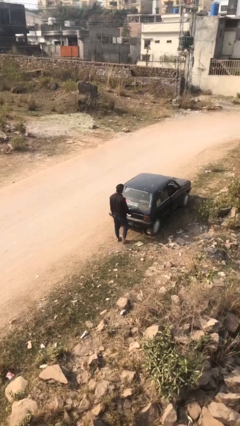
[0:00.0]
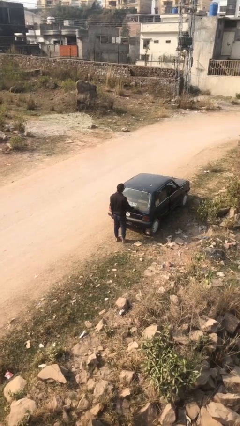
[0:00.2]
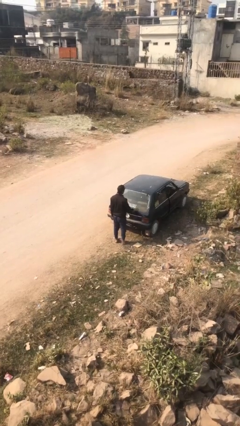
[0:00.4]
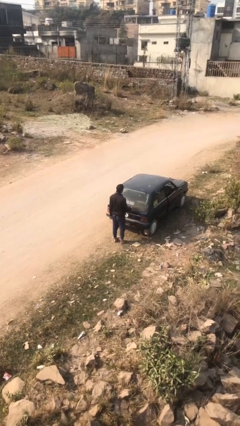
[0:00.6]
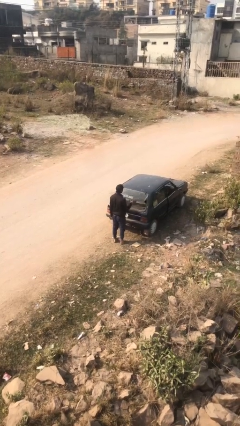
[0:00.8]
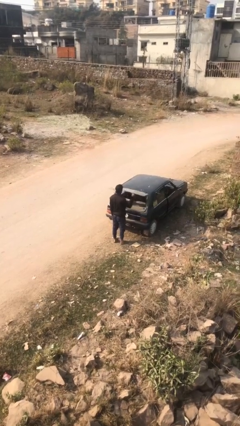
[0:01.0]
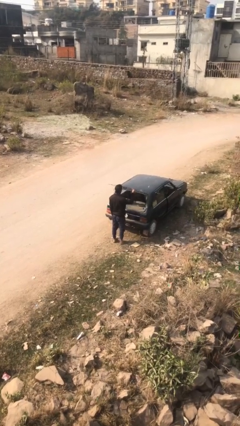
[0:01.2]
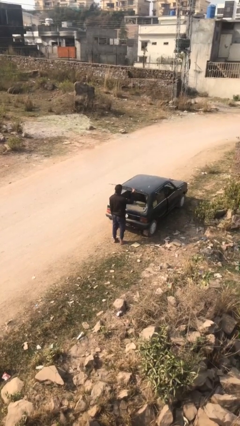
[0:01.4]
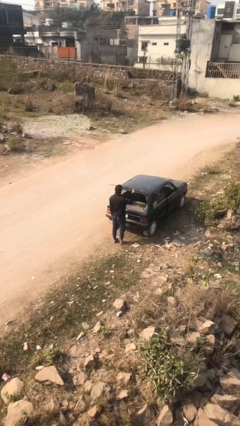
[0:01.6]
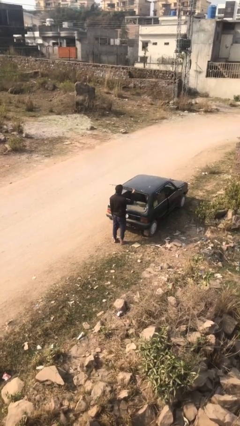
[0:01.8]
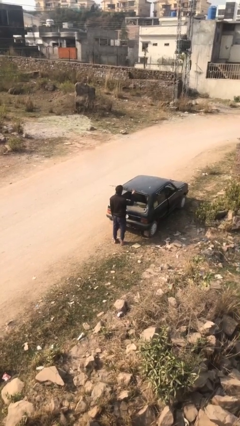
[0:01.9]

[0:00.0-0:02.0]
person opens car trunk

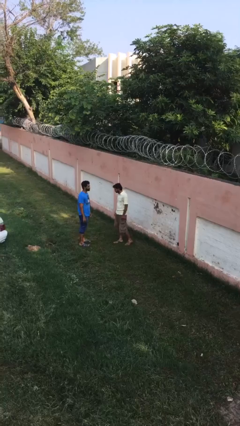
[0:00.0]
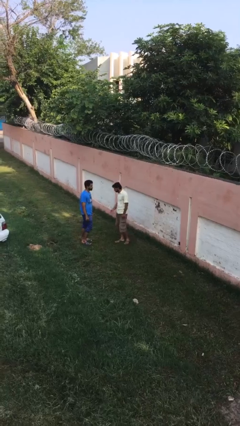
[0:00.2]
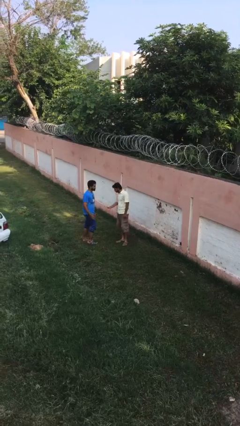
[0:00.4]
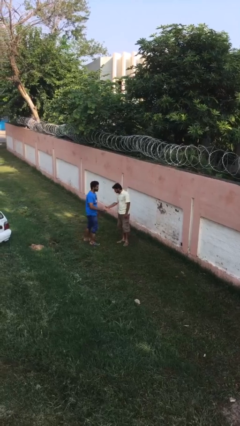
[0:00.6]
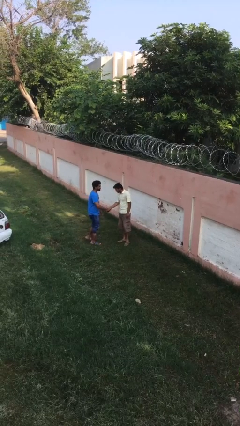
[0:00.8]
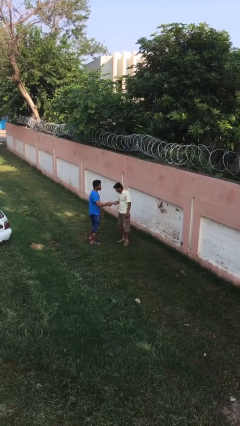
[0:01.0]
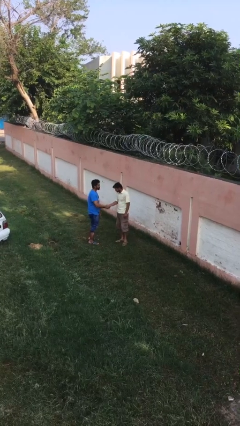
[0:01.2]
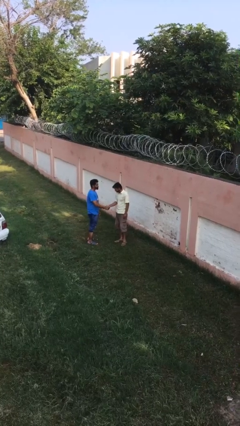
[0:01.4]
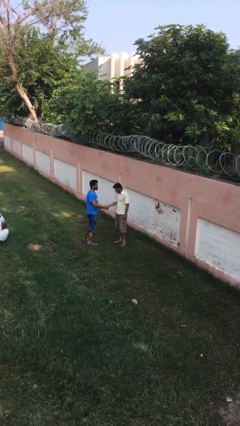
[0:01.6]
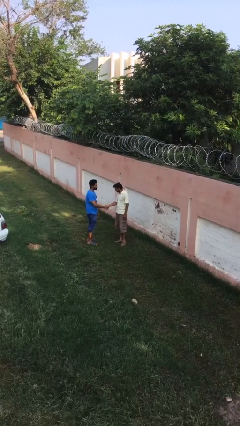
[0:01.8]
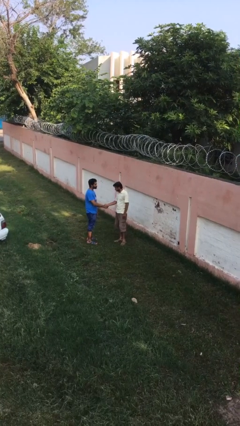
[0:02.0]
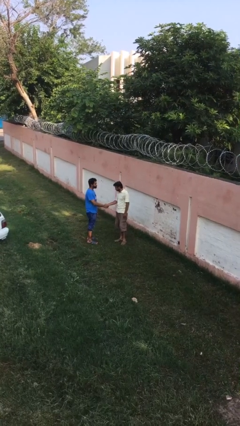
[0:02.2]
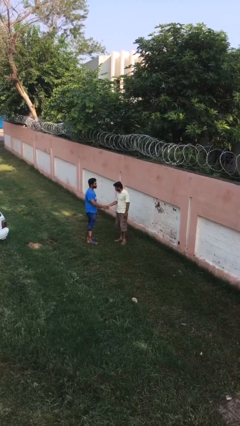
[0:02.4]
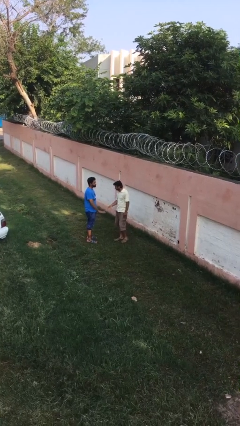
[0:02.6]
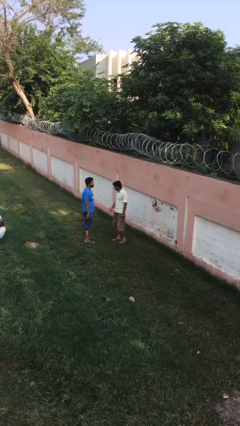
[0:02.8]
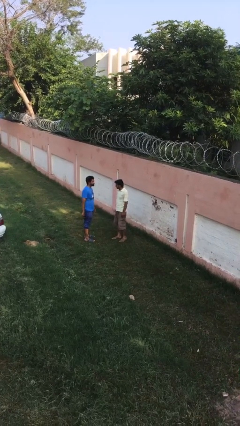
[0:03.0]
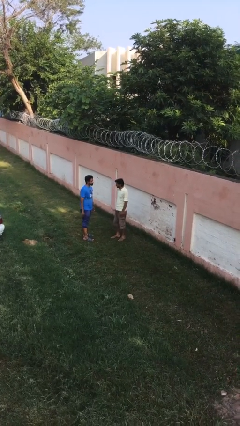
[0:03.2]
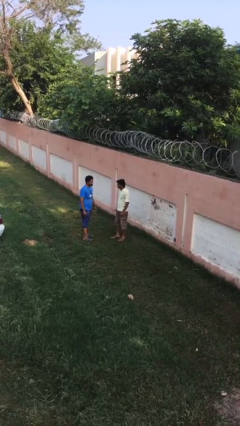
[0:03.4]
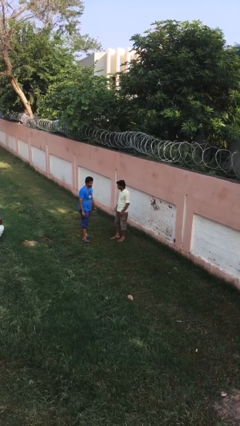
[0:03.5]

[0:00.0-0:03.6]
person shakes hand

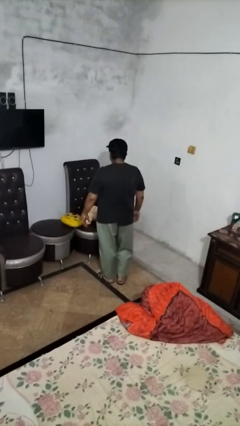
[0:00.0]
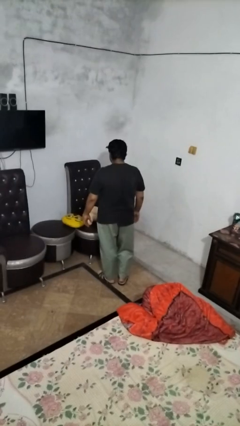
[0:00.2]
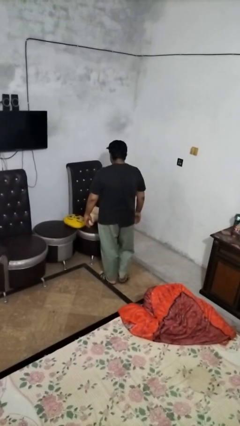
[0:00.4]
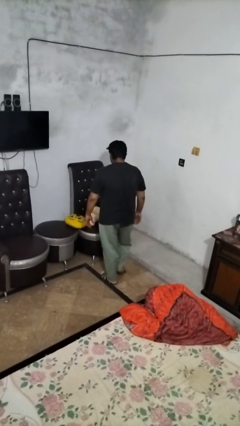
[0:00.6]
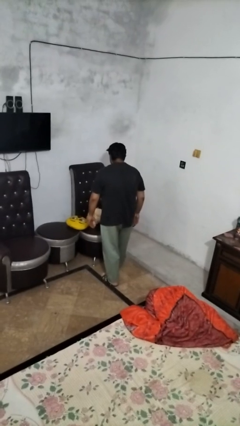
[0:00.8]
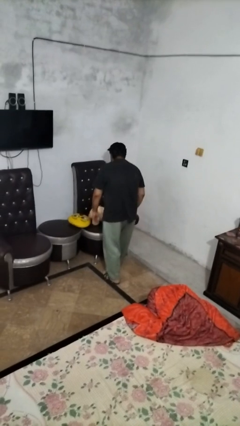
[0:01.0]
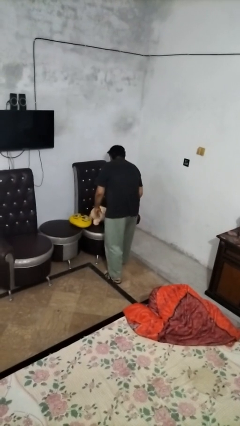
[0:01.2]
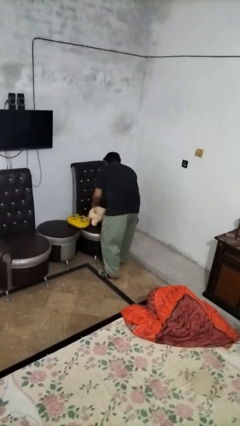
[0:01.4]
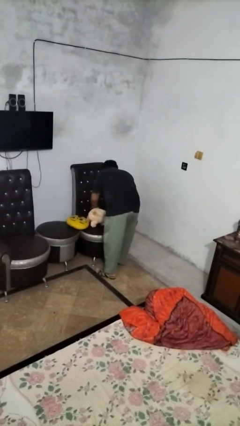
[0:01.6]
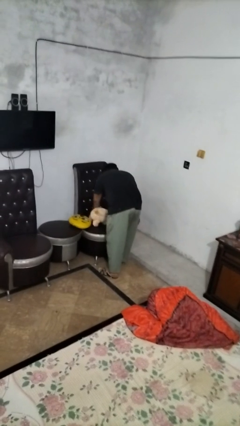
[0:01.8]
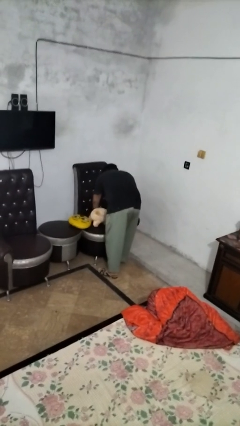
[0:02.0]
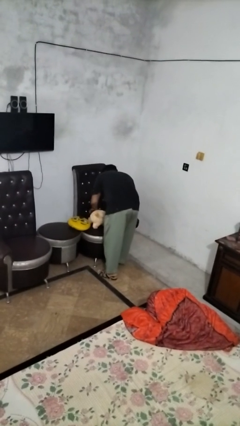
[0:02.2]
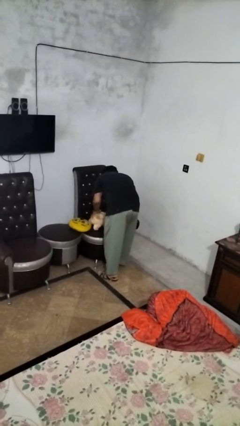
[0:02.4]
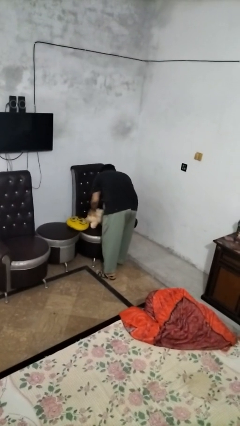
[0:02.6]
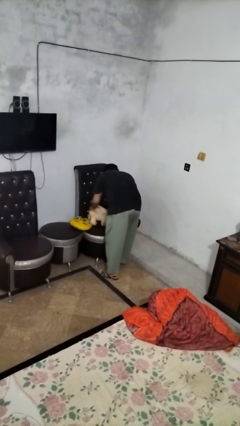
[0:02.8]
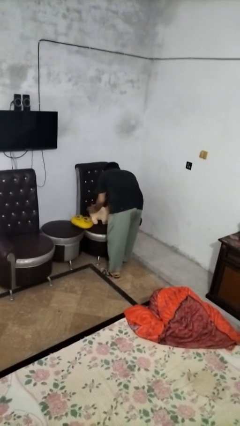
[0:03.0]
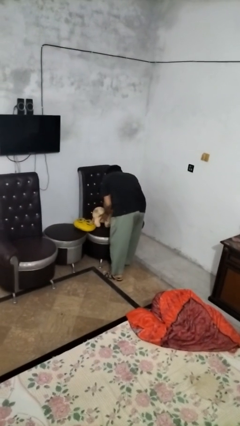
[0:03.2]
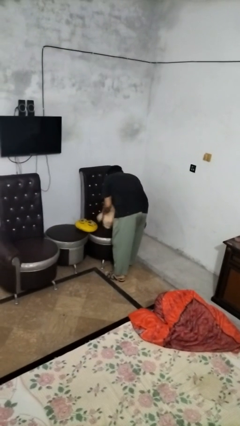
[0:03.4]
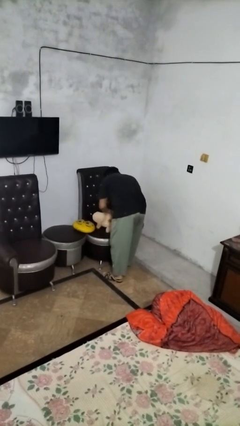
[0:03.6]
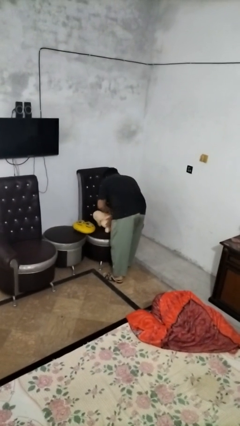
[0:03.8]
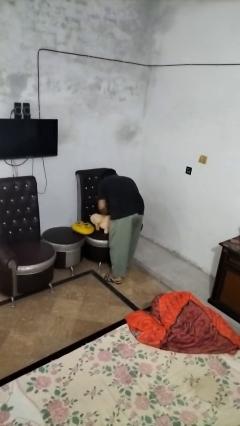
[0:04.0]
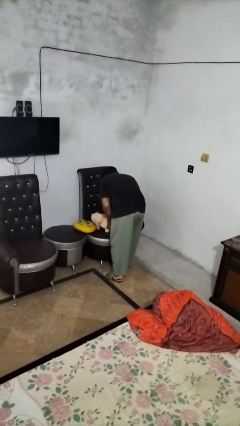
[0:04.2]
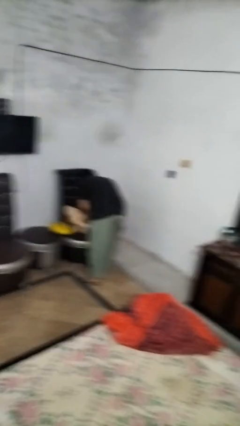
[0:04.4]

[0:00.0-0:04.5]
person searches in couch

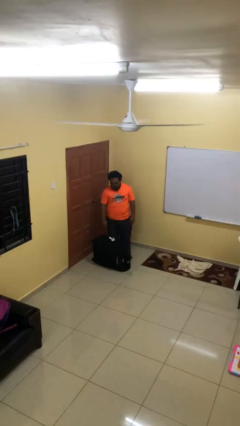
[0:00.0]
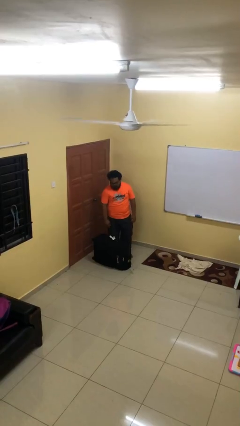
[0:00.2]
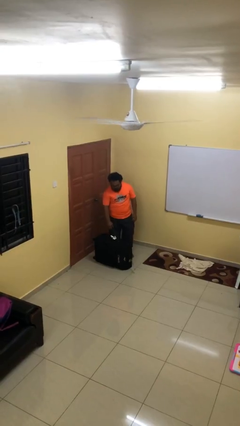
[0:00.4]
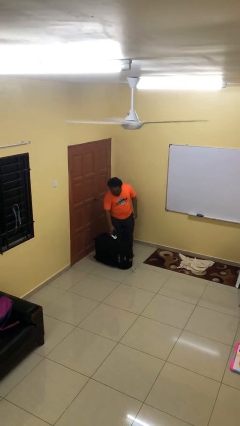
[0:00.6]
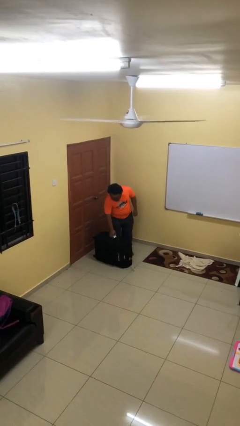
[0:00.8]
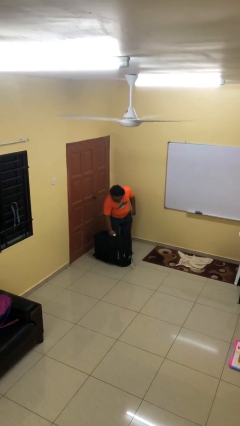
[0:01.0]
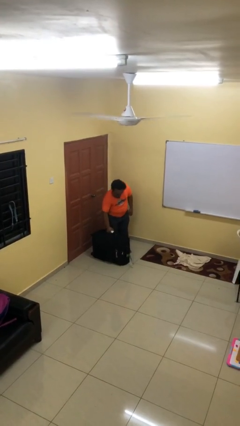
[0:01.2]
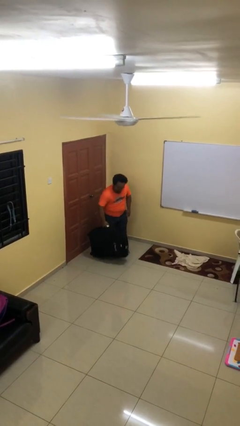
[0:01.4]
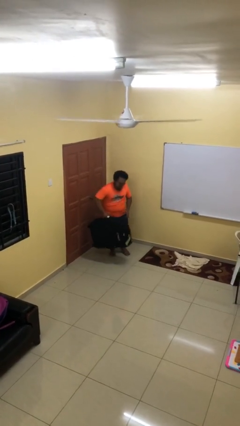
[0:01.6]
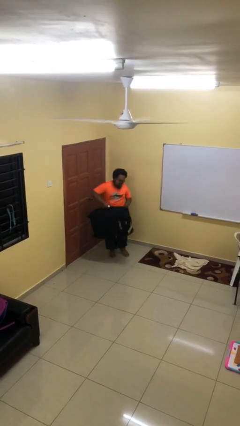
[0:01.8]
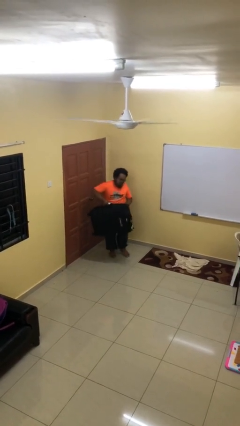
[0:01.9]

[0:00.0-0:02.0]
person picks up object from floor

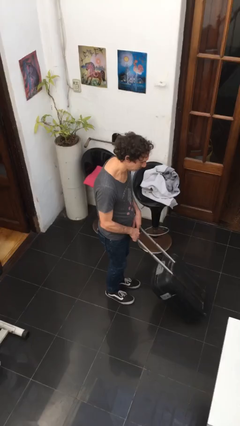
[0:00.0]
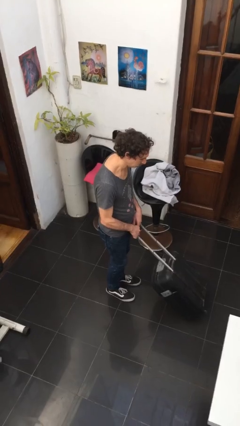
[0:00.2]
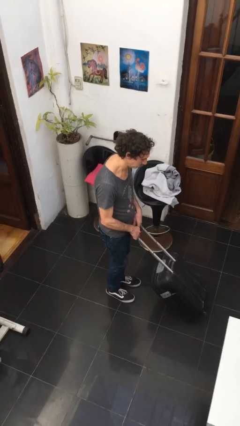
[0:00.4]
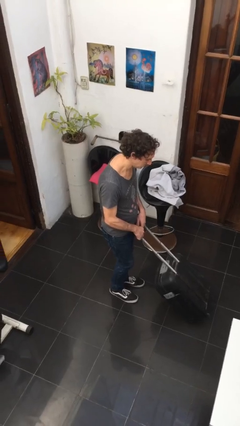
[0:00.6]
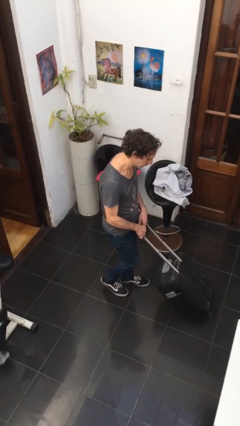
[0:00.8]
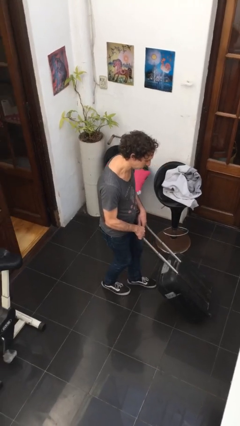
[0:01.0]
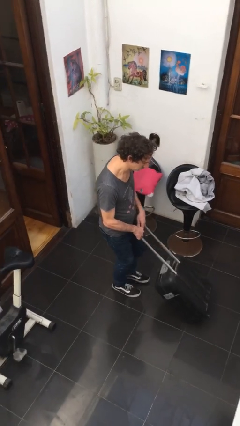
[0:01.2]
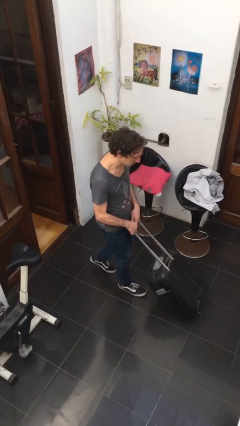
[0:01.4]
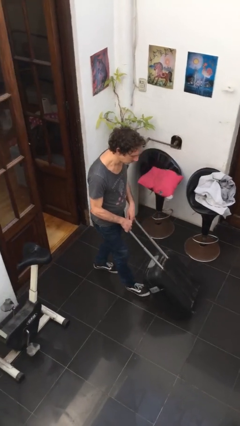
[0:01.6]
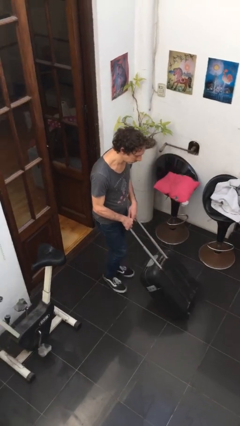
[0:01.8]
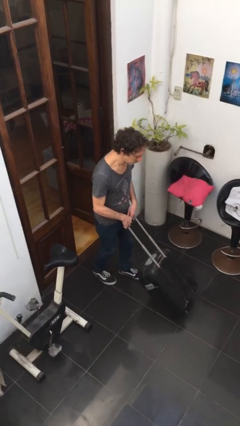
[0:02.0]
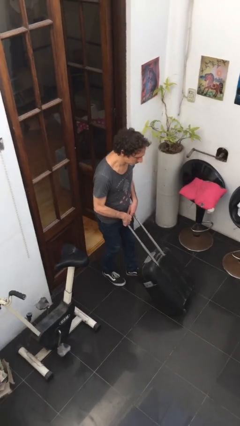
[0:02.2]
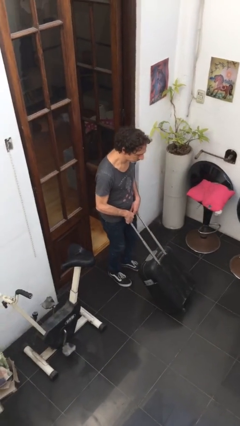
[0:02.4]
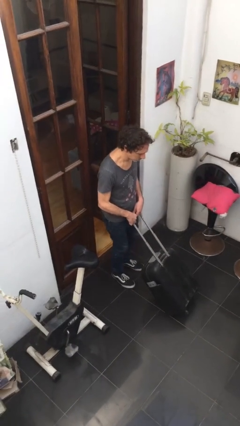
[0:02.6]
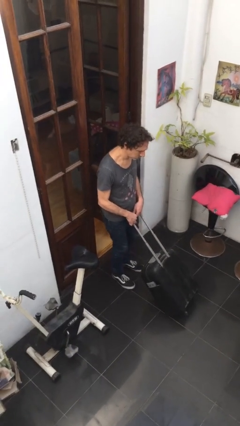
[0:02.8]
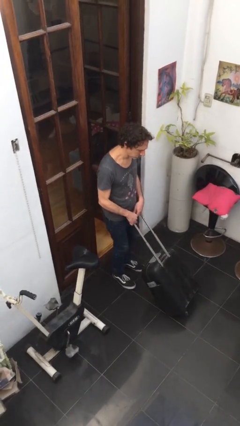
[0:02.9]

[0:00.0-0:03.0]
person pulls wheeled cart

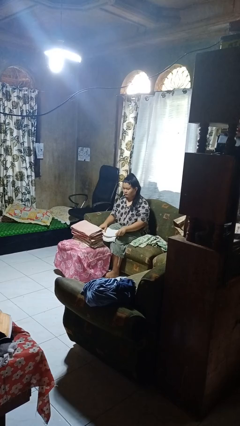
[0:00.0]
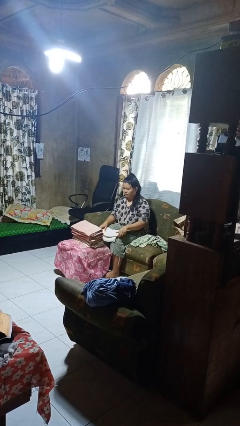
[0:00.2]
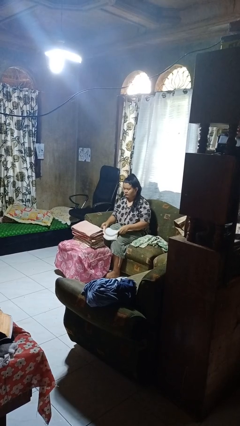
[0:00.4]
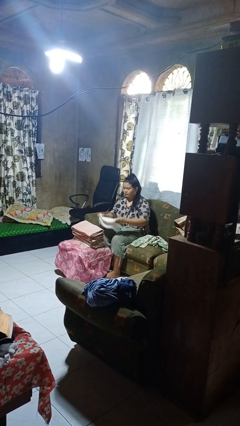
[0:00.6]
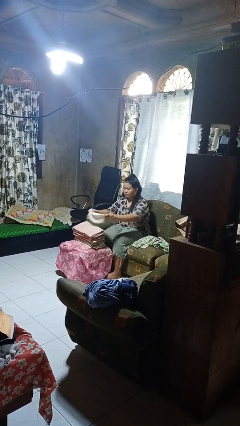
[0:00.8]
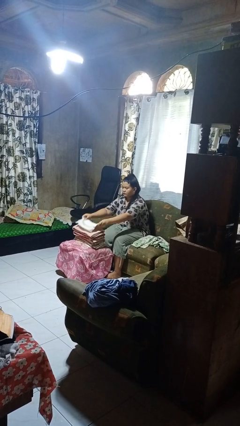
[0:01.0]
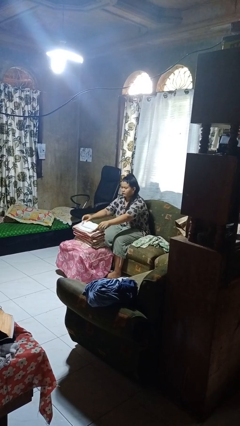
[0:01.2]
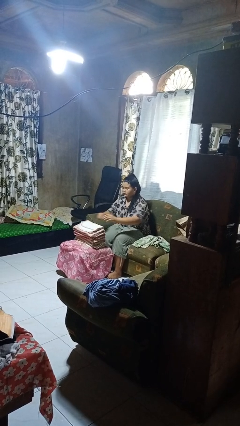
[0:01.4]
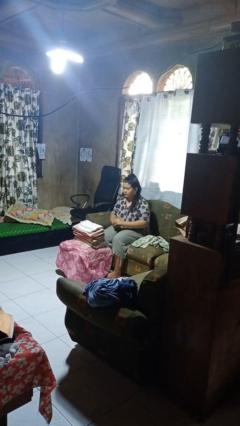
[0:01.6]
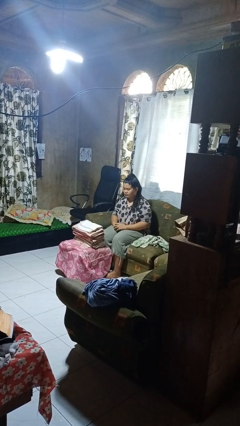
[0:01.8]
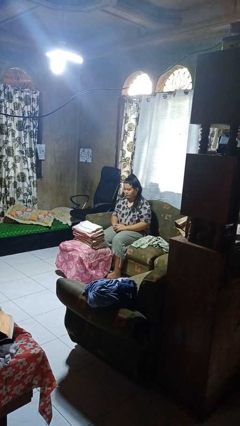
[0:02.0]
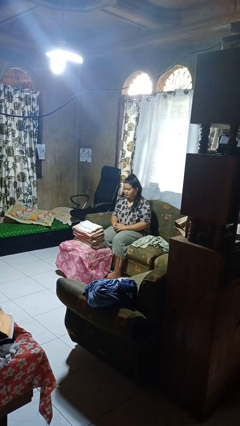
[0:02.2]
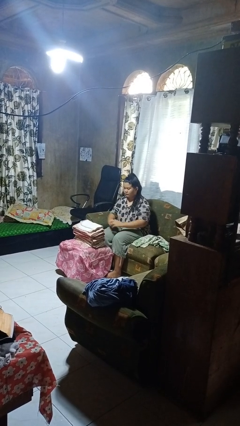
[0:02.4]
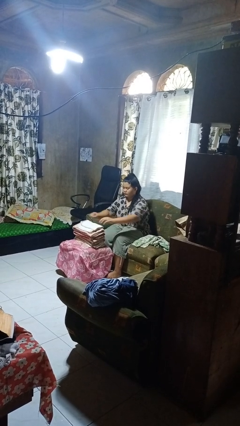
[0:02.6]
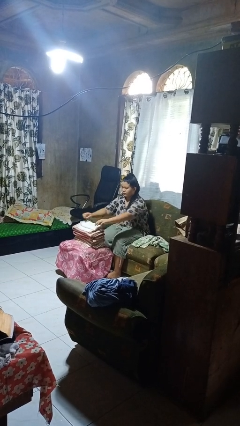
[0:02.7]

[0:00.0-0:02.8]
person folds towel
